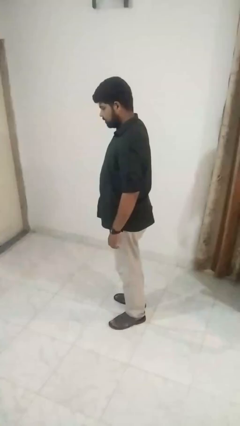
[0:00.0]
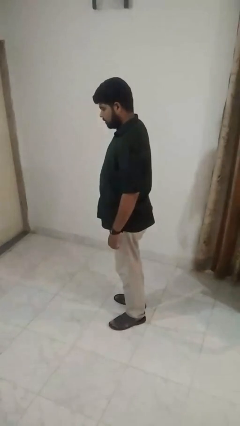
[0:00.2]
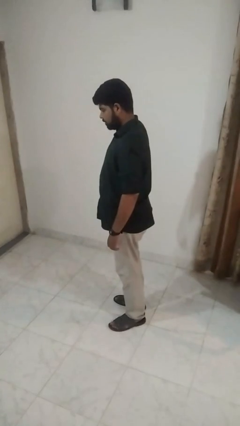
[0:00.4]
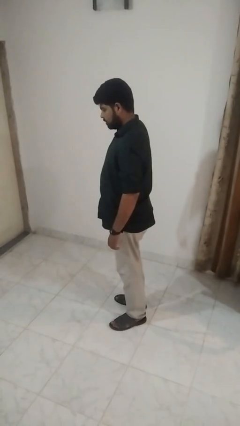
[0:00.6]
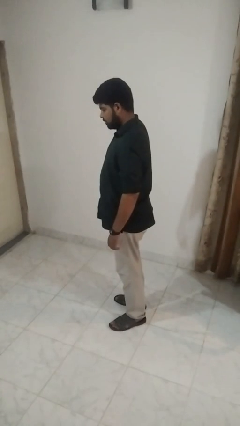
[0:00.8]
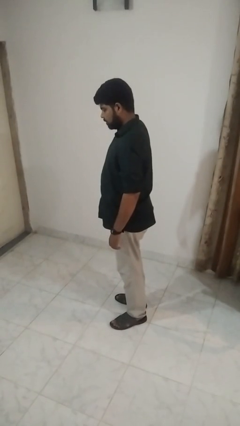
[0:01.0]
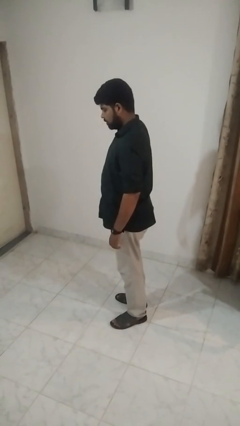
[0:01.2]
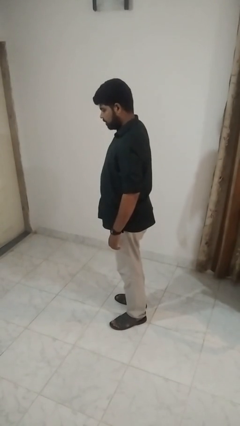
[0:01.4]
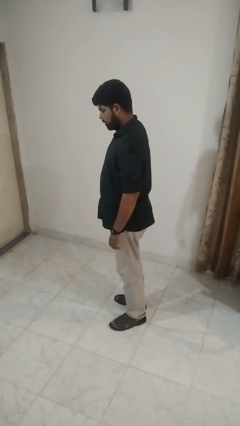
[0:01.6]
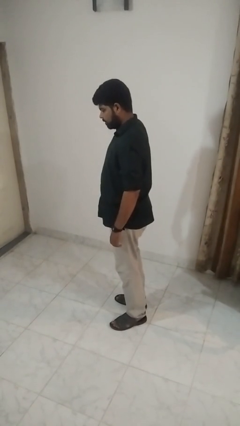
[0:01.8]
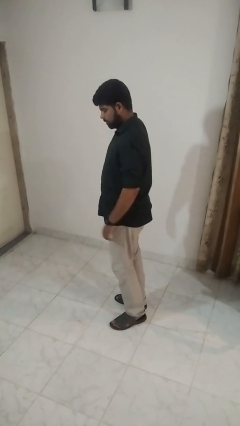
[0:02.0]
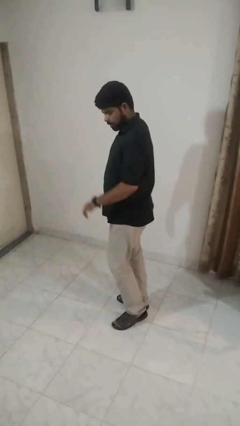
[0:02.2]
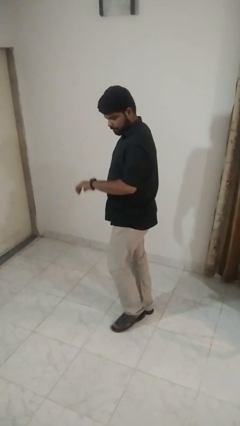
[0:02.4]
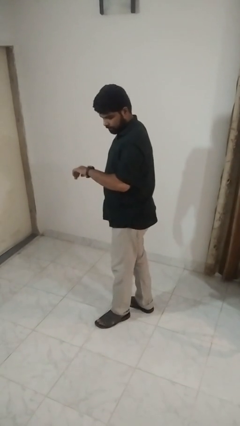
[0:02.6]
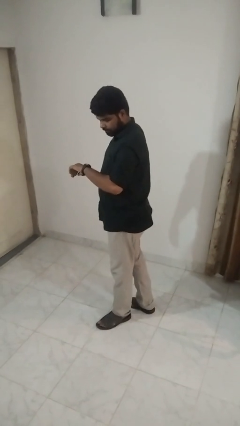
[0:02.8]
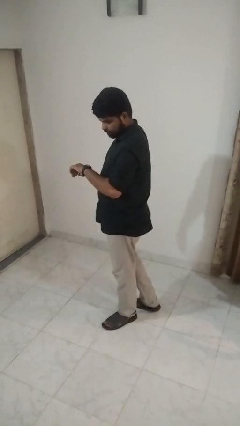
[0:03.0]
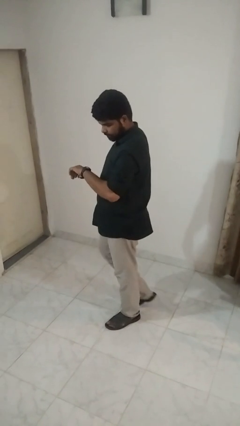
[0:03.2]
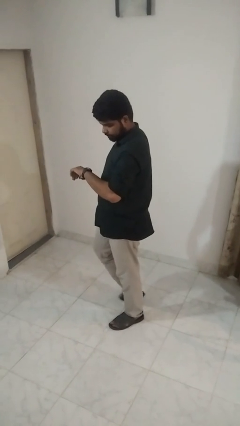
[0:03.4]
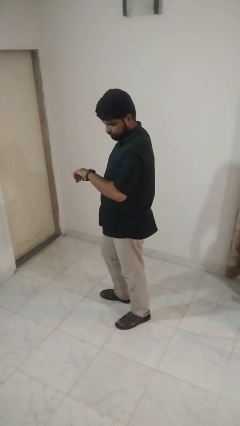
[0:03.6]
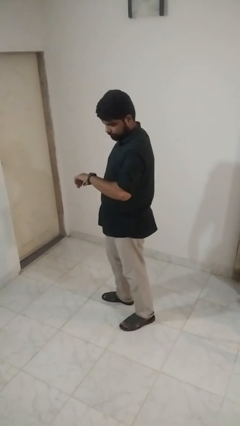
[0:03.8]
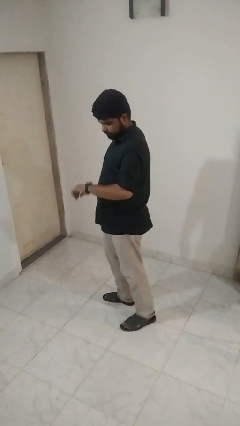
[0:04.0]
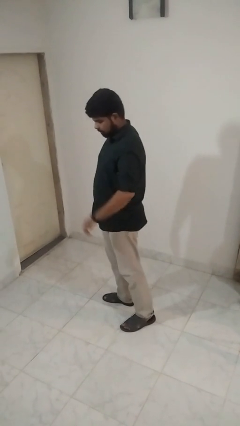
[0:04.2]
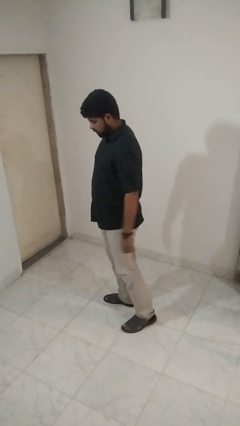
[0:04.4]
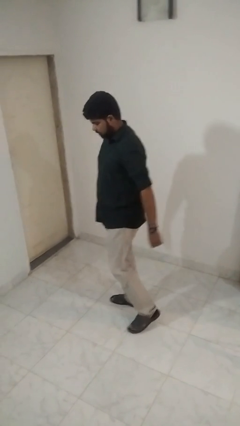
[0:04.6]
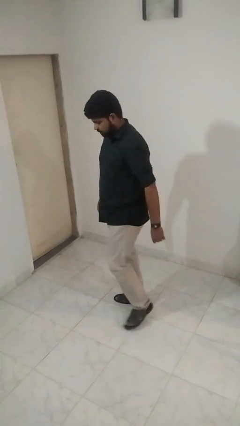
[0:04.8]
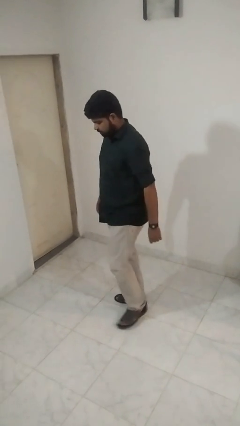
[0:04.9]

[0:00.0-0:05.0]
person looks at wristwatch

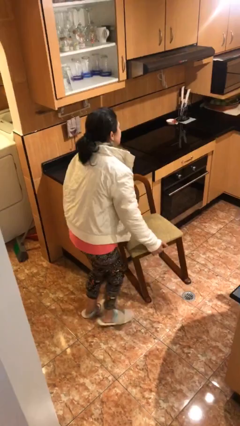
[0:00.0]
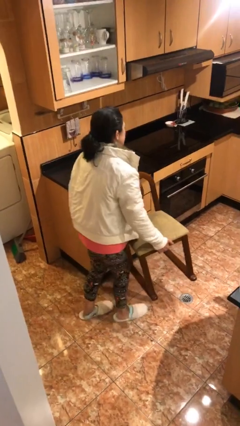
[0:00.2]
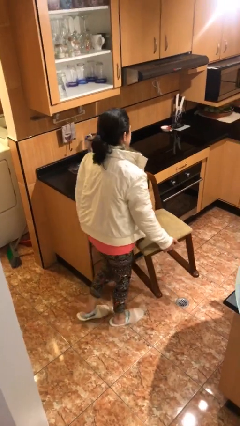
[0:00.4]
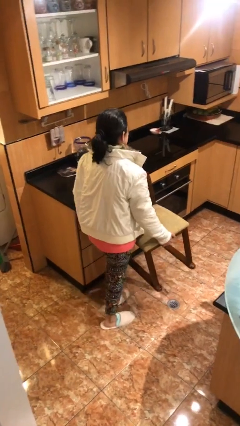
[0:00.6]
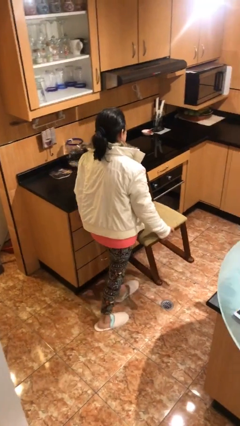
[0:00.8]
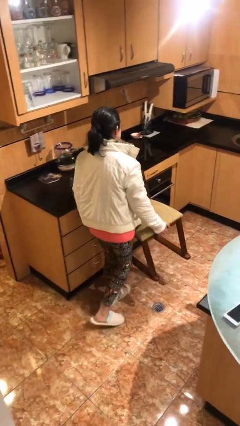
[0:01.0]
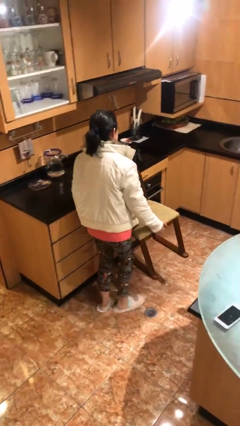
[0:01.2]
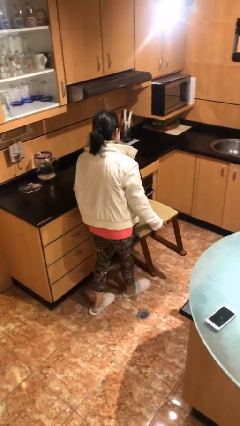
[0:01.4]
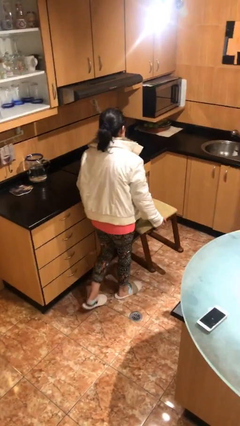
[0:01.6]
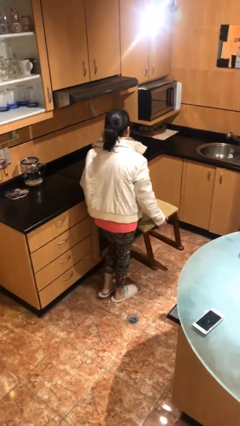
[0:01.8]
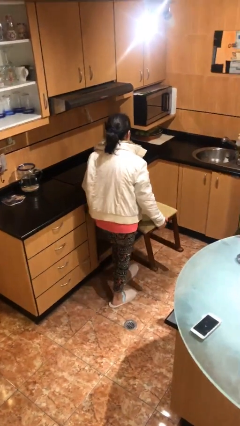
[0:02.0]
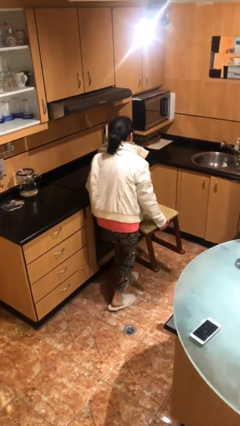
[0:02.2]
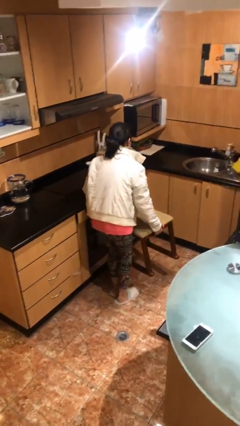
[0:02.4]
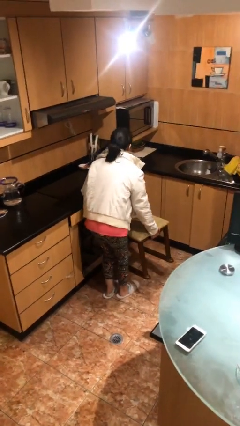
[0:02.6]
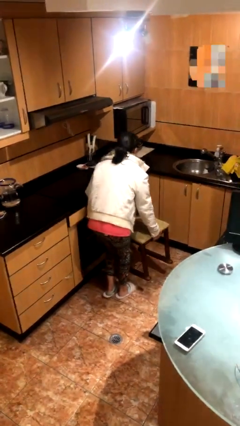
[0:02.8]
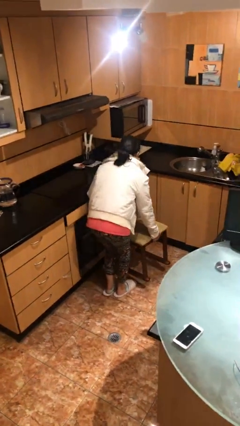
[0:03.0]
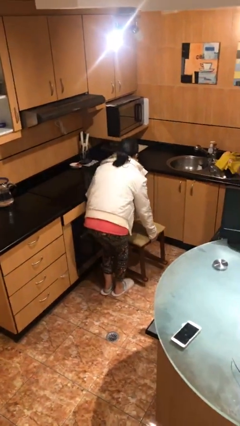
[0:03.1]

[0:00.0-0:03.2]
person carries heavy object

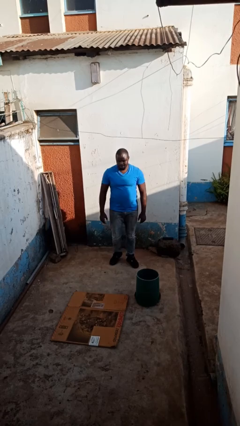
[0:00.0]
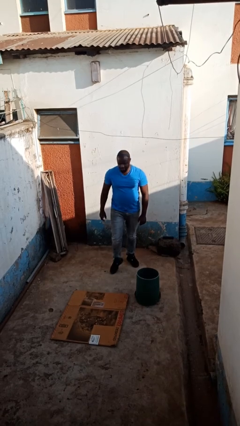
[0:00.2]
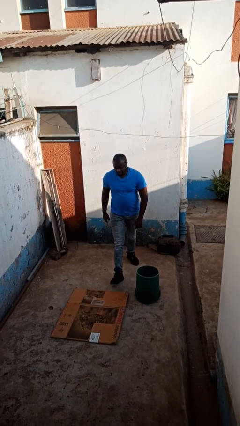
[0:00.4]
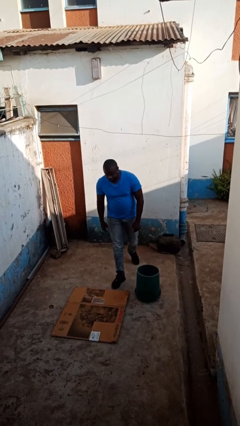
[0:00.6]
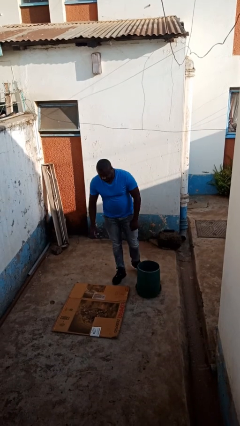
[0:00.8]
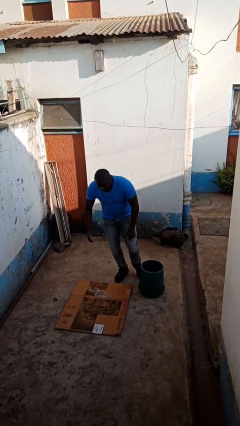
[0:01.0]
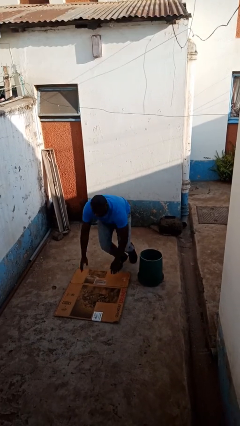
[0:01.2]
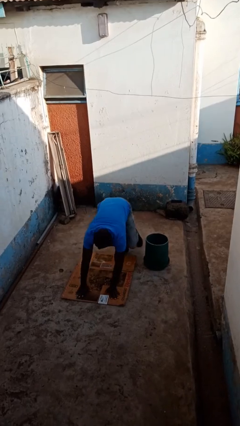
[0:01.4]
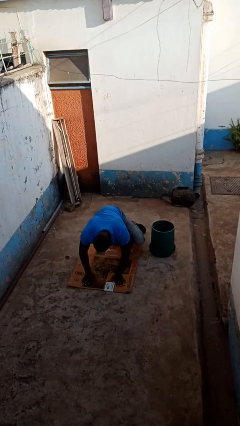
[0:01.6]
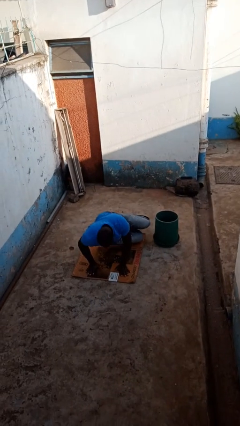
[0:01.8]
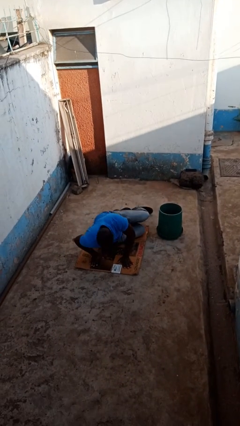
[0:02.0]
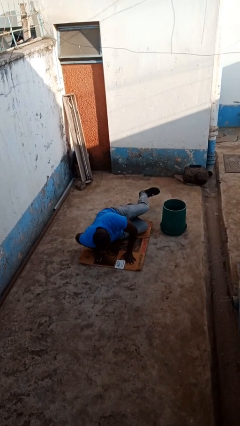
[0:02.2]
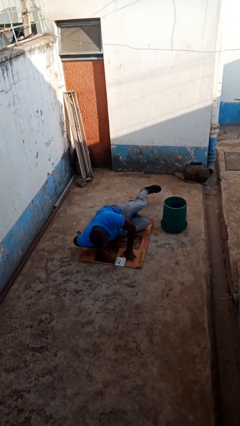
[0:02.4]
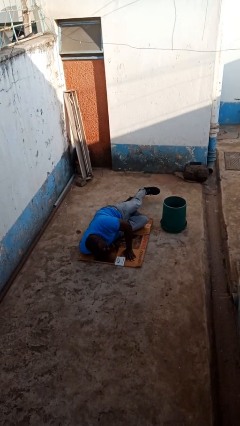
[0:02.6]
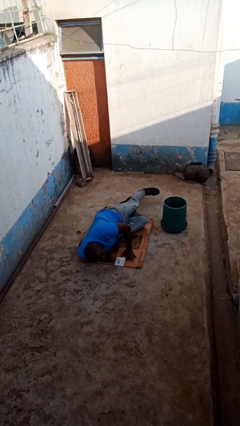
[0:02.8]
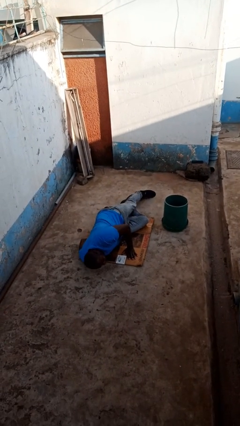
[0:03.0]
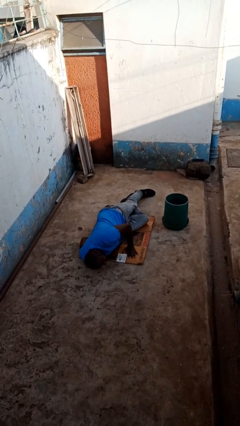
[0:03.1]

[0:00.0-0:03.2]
person trips on object on floor

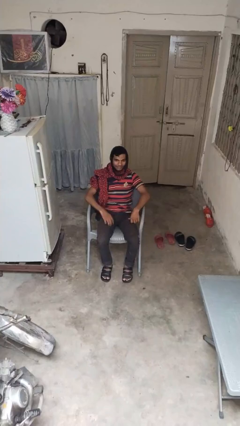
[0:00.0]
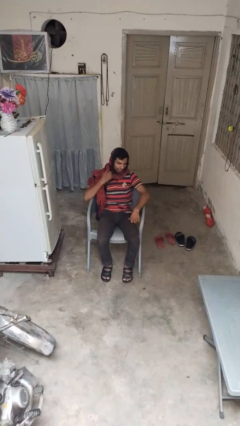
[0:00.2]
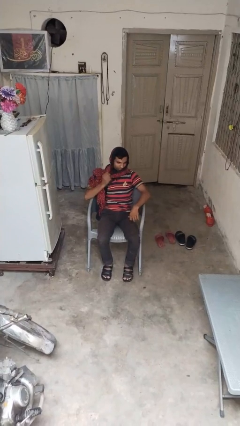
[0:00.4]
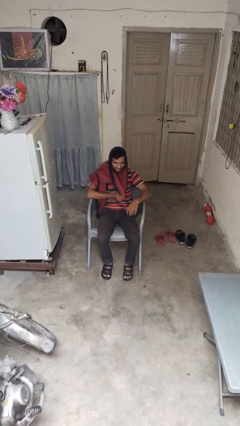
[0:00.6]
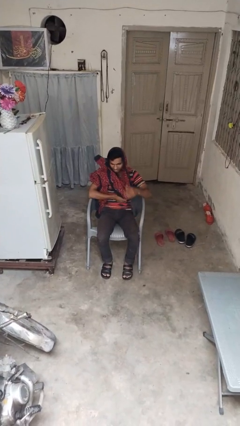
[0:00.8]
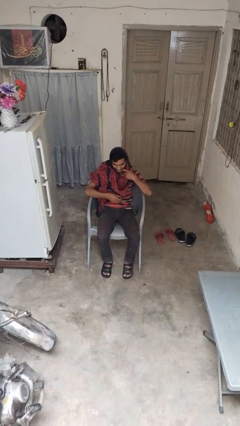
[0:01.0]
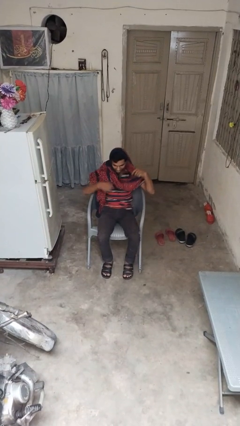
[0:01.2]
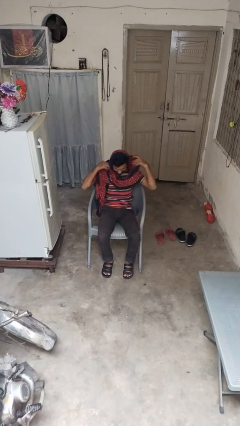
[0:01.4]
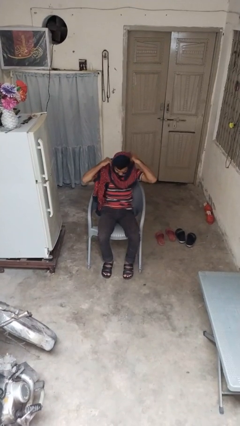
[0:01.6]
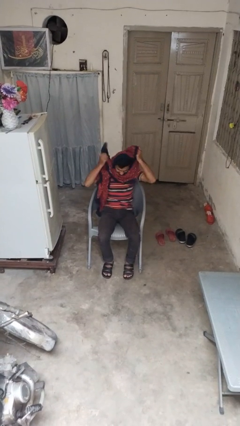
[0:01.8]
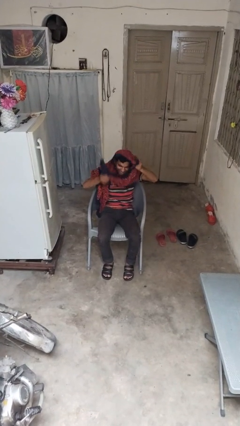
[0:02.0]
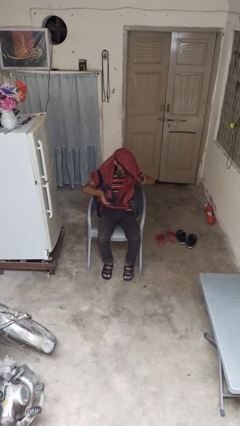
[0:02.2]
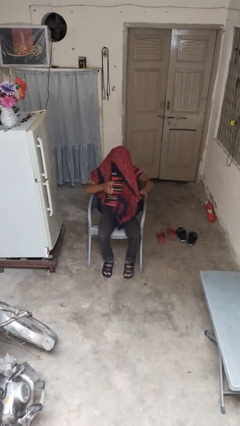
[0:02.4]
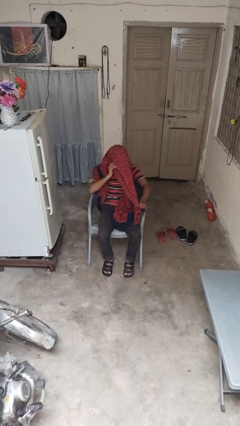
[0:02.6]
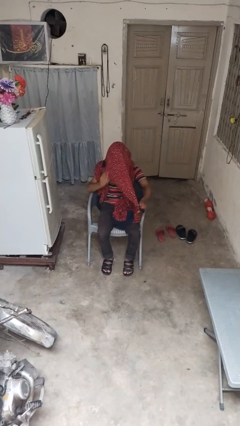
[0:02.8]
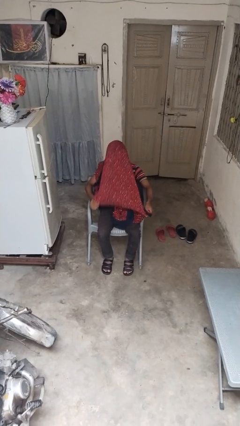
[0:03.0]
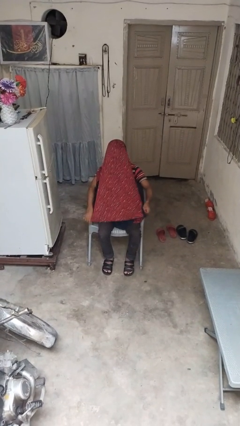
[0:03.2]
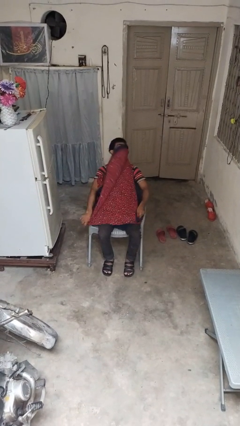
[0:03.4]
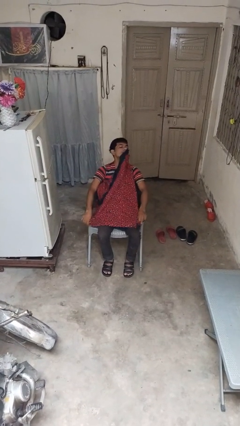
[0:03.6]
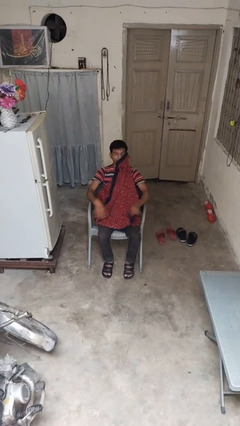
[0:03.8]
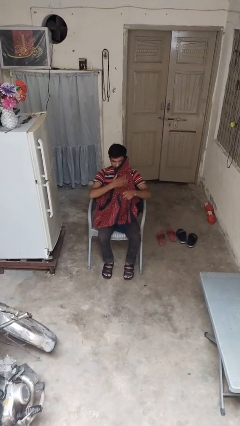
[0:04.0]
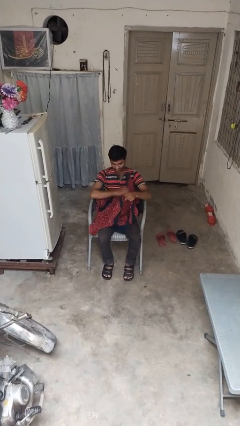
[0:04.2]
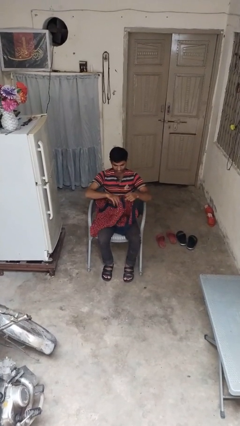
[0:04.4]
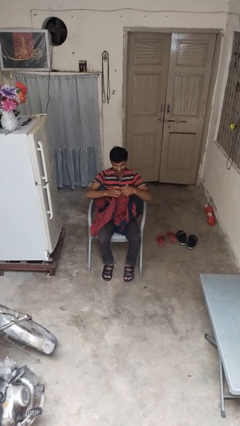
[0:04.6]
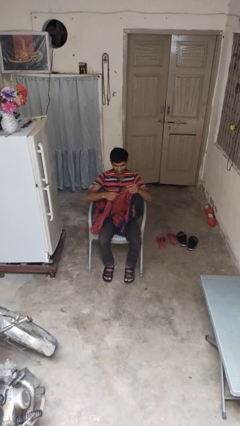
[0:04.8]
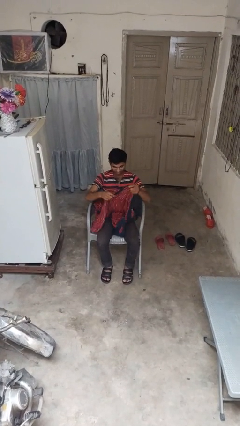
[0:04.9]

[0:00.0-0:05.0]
person takes off scarf

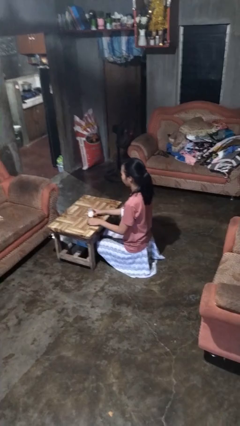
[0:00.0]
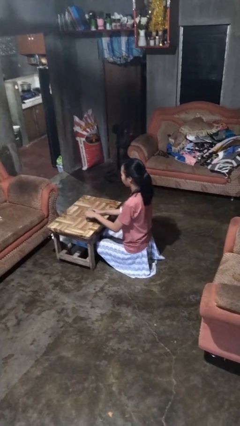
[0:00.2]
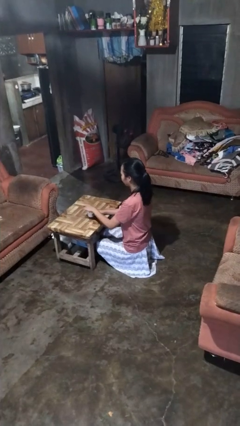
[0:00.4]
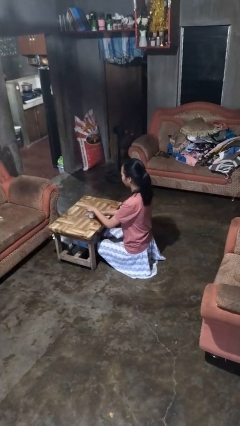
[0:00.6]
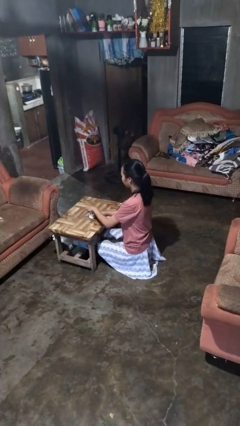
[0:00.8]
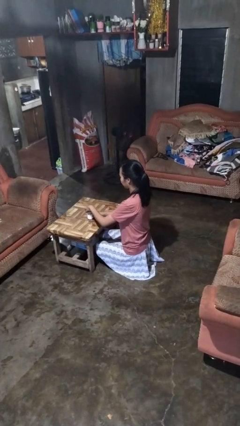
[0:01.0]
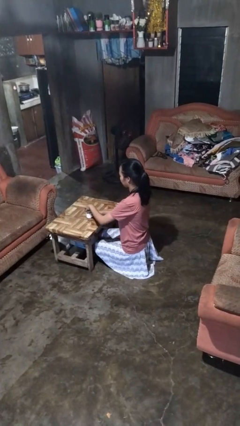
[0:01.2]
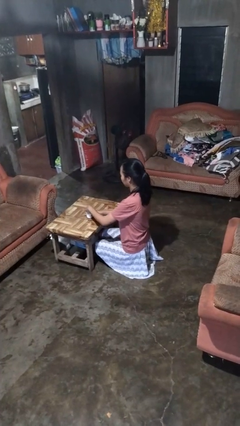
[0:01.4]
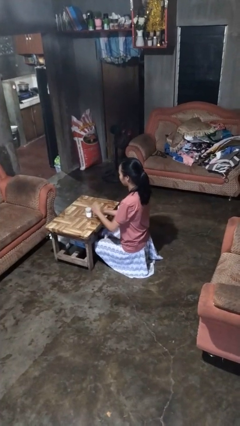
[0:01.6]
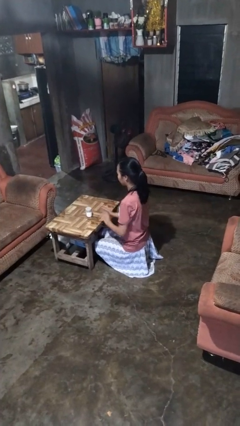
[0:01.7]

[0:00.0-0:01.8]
person closes jar
